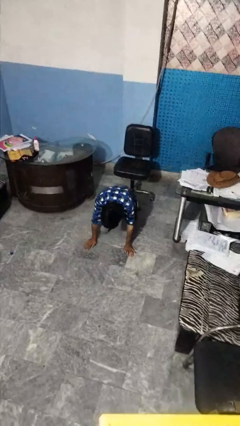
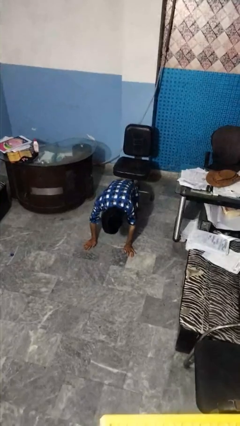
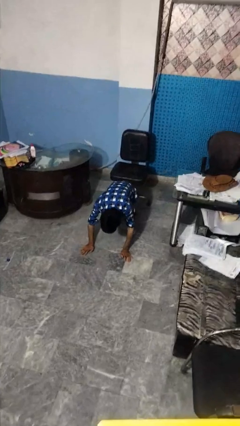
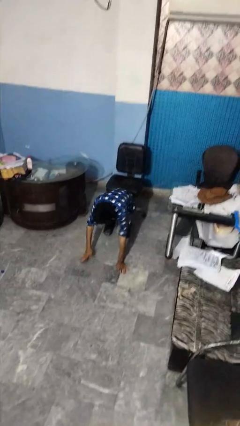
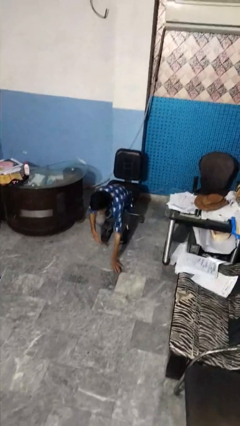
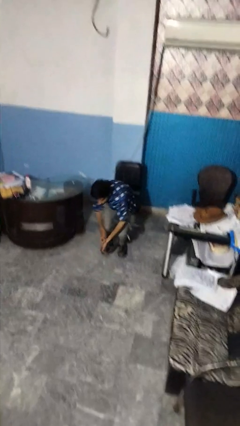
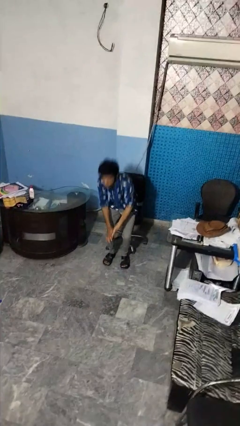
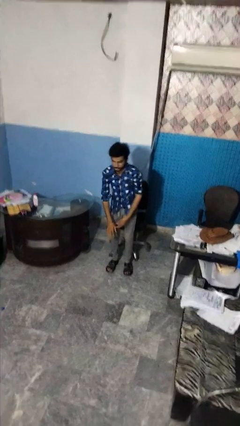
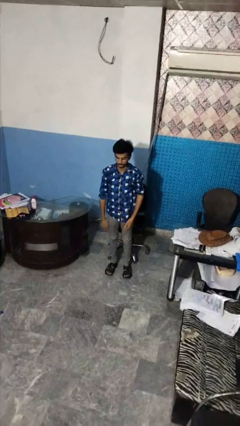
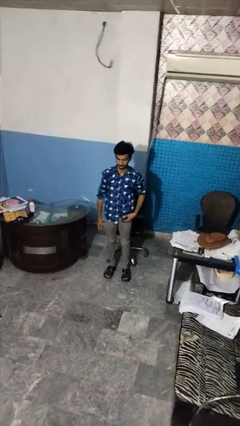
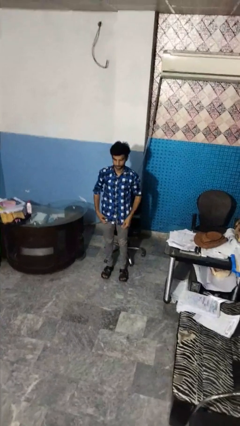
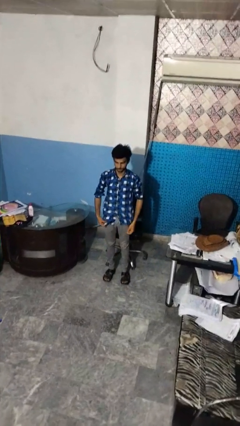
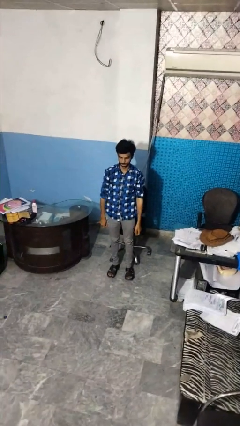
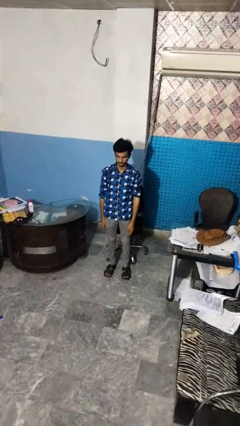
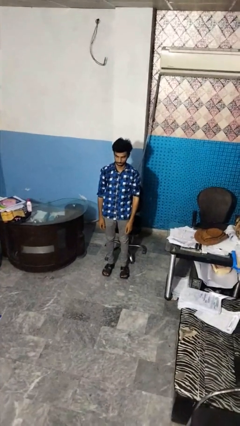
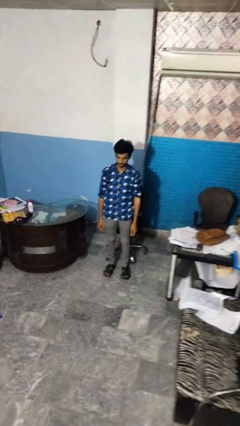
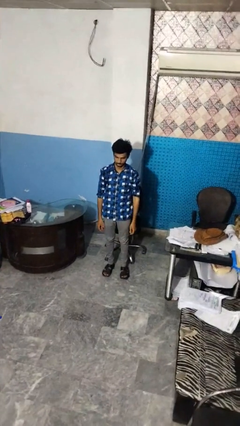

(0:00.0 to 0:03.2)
person stands up from floor

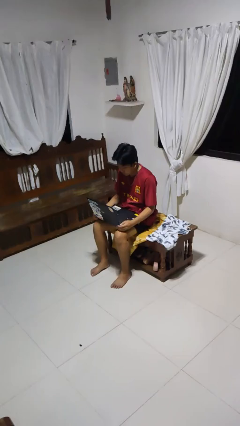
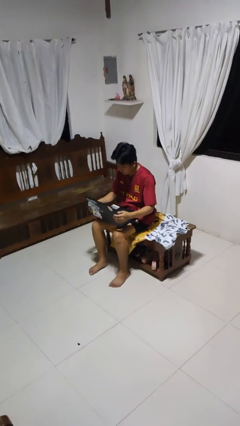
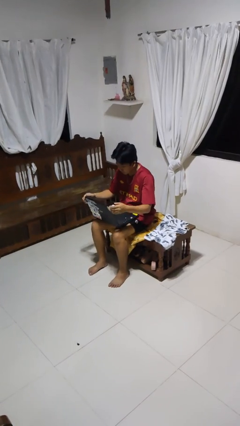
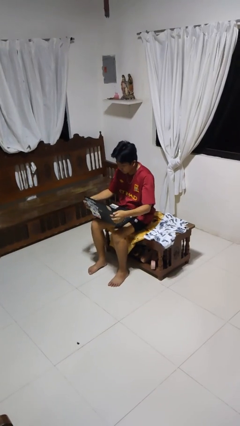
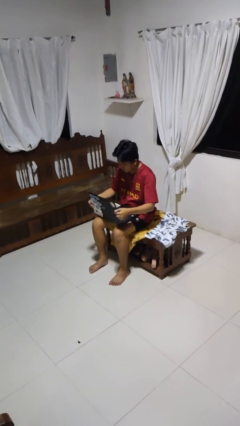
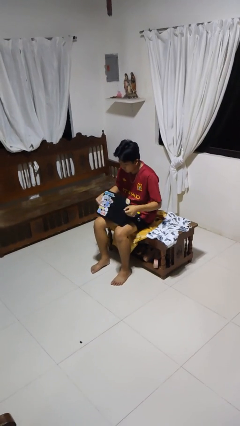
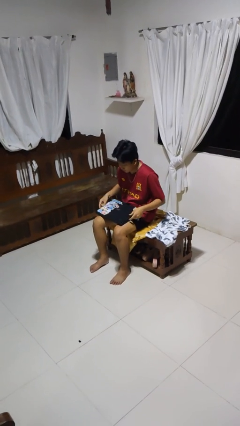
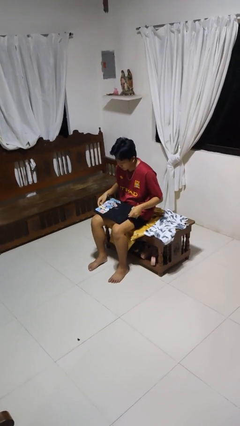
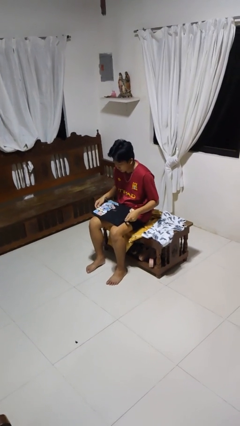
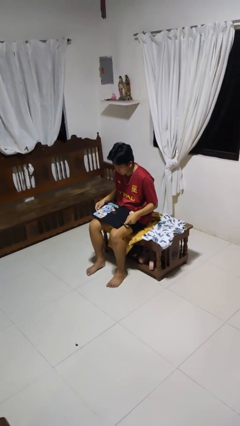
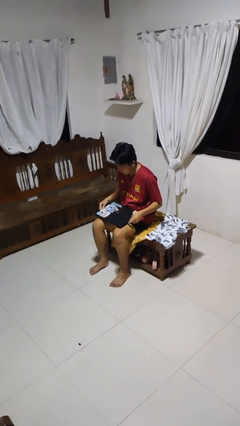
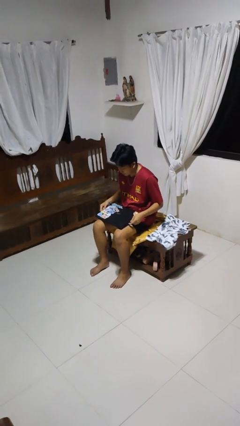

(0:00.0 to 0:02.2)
person closes laptop

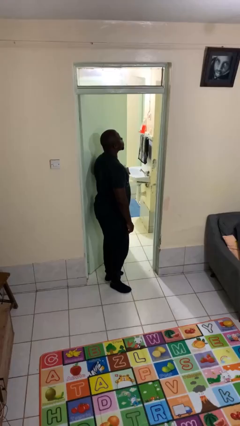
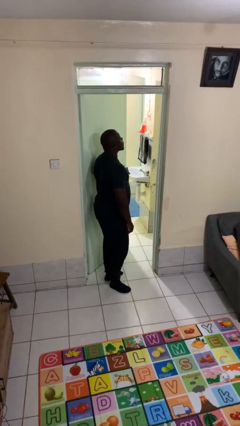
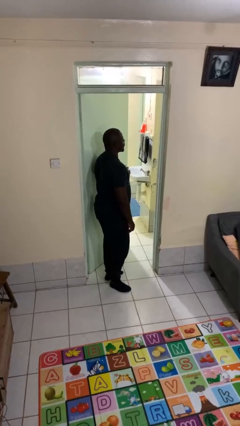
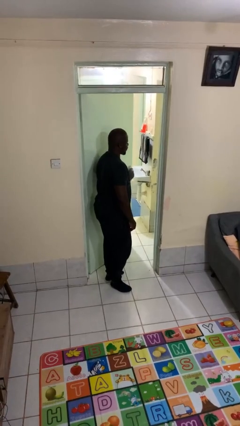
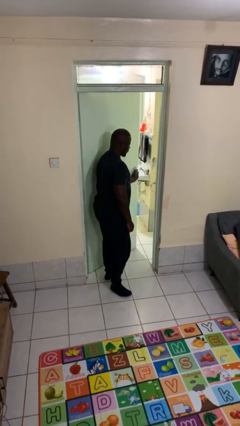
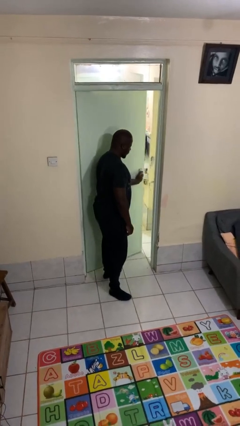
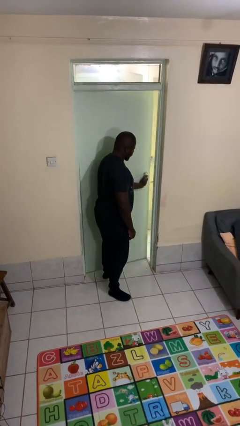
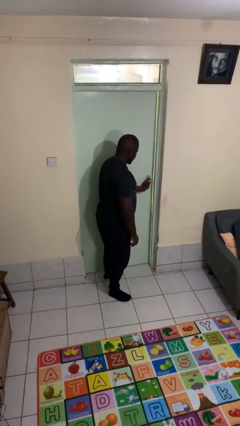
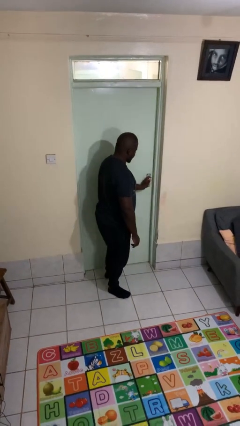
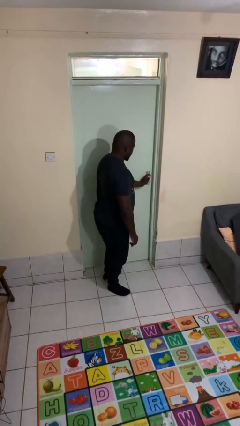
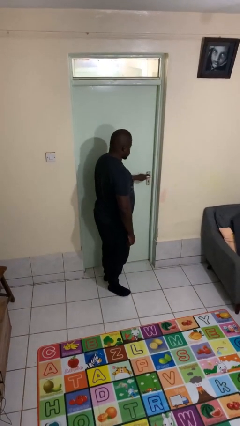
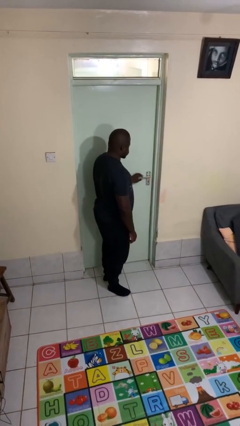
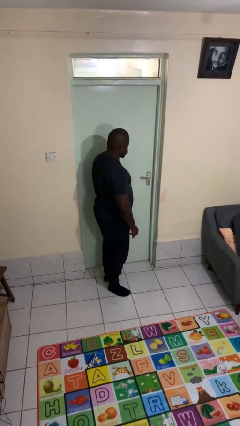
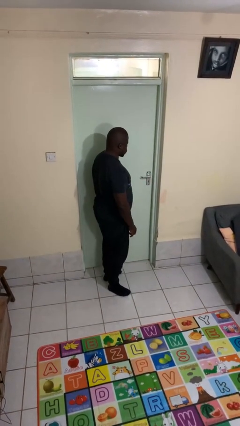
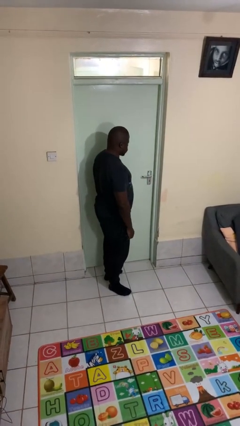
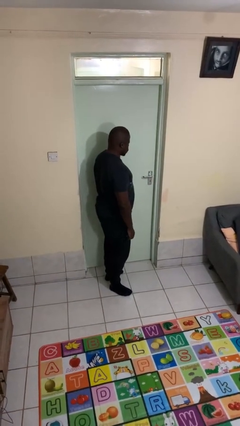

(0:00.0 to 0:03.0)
person closes facility door

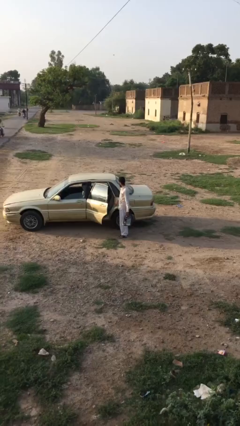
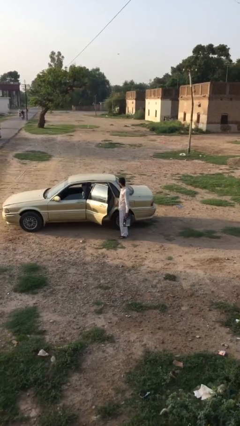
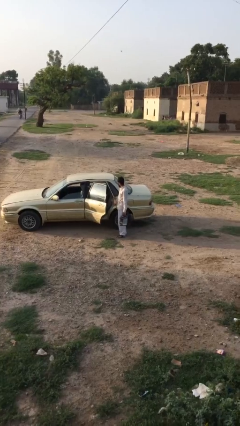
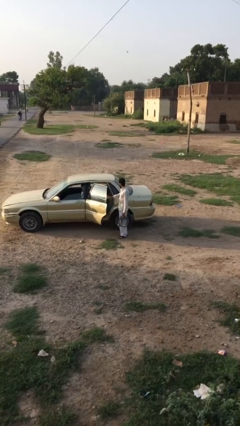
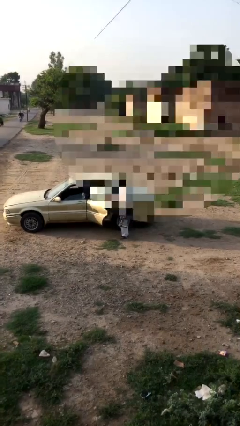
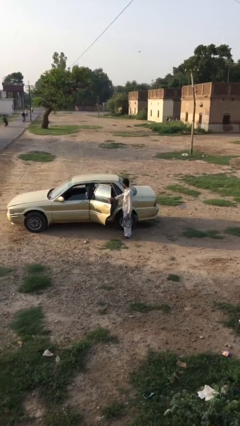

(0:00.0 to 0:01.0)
person closes car door

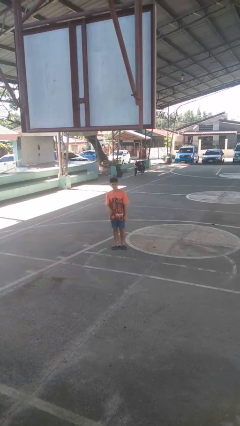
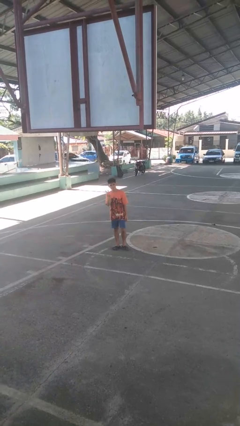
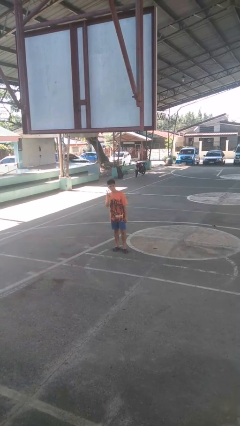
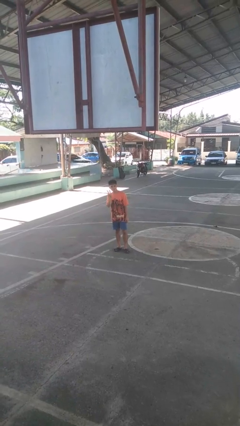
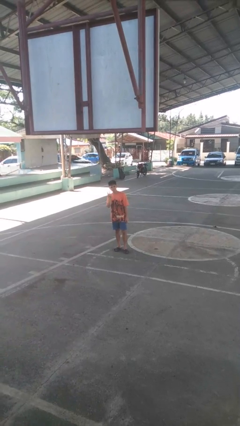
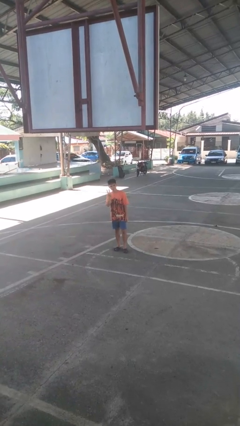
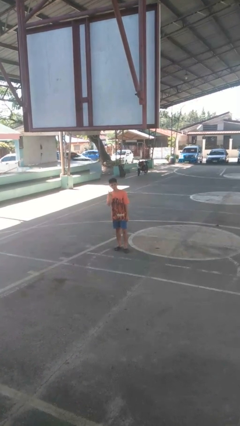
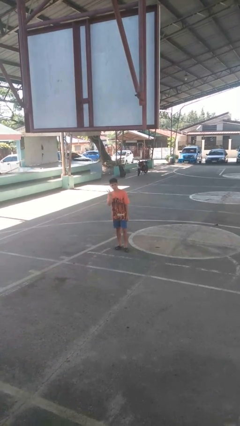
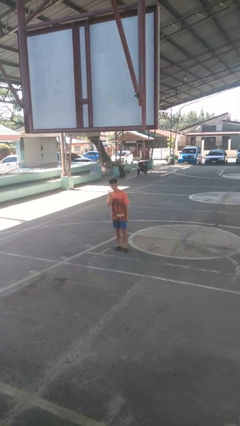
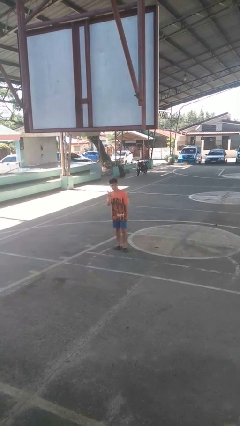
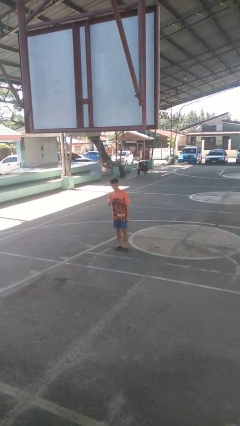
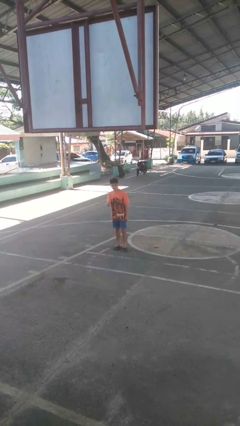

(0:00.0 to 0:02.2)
person gestures peace

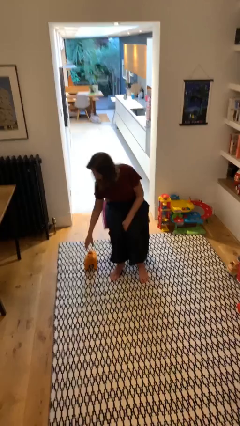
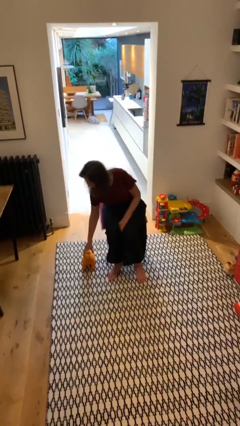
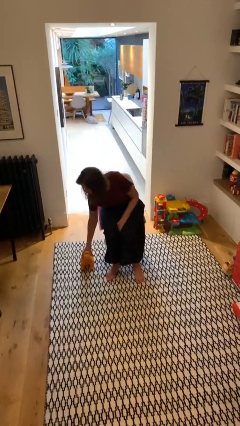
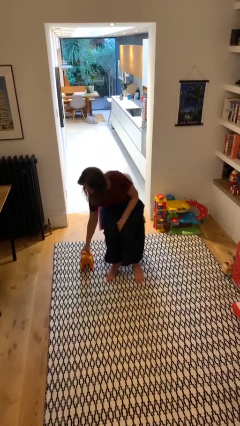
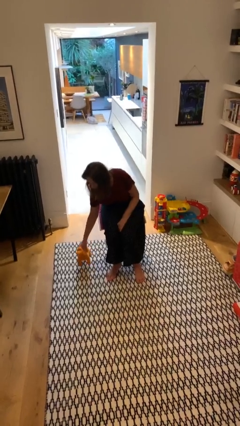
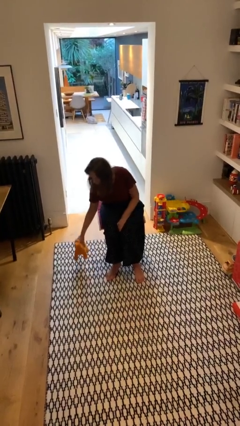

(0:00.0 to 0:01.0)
person picks up object from floor

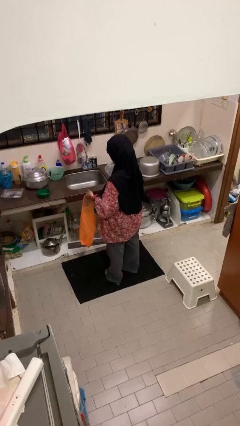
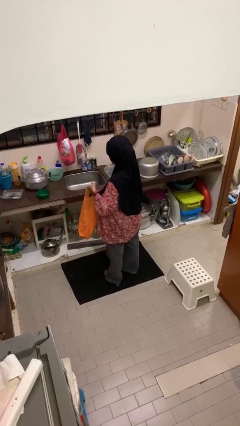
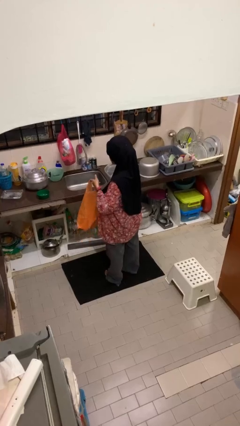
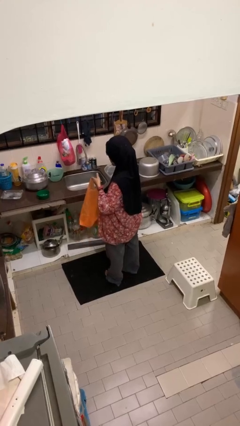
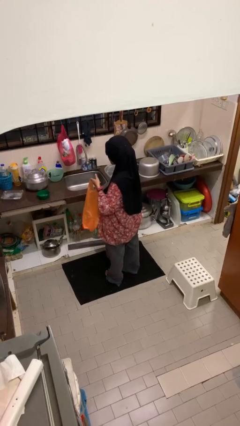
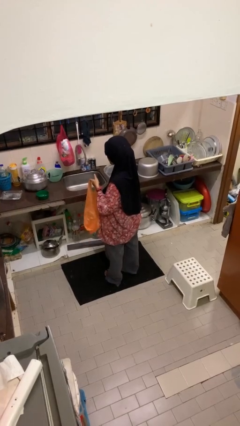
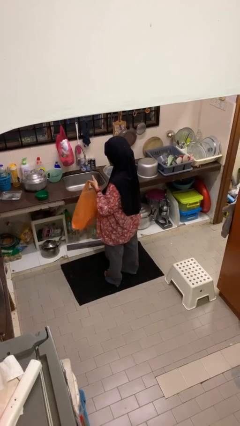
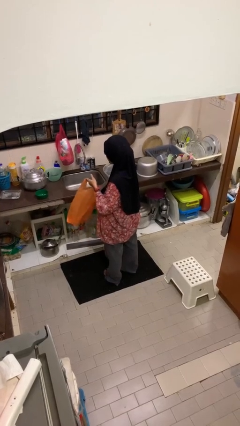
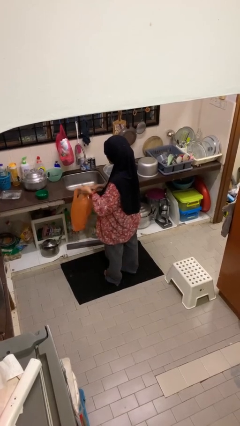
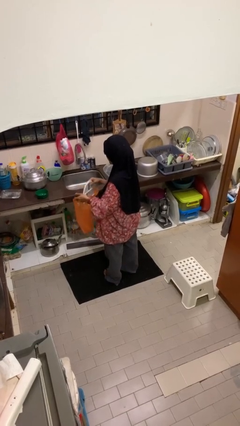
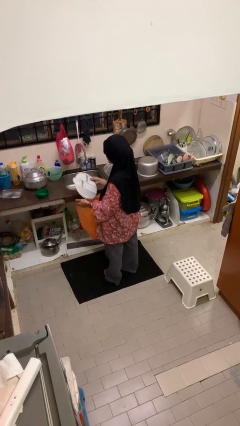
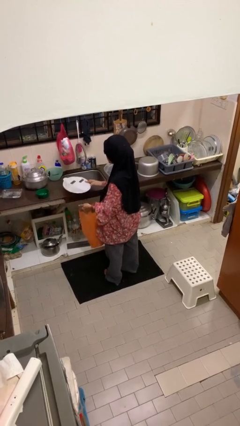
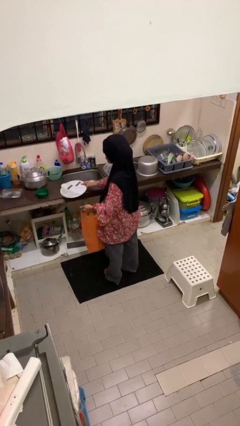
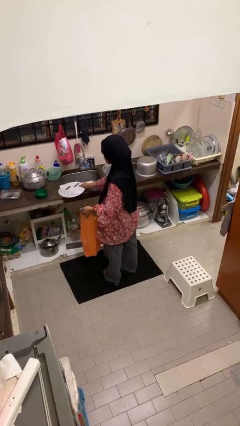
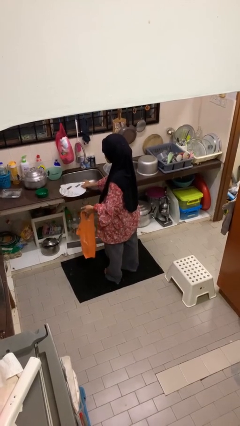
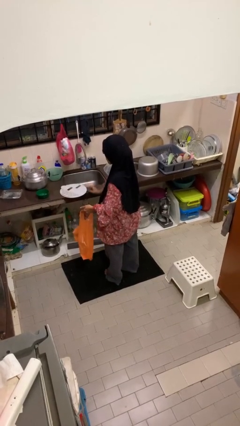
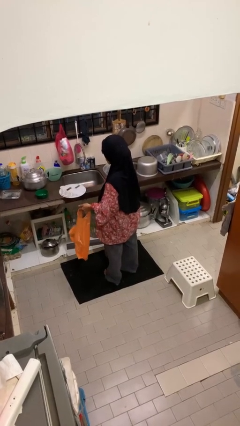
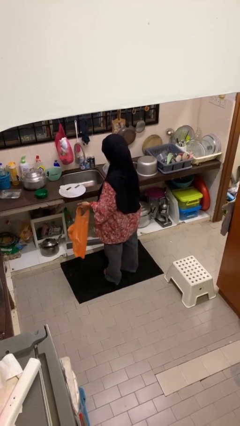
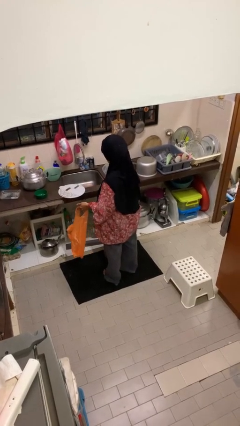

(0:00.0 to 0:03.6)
person takes object from bag

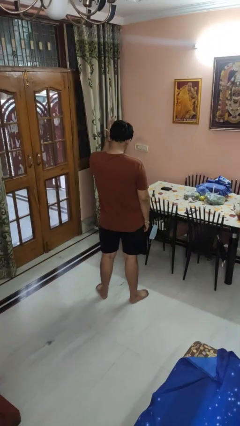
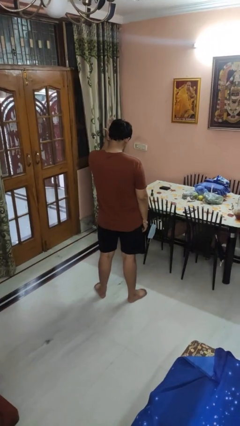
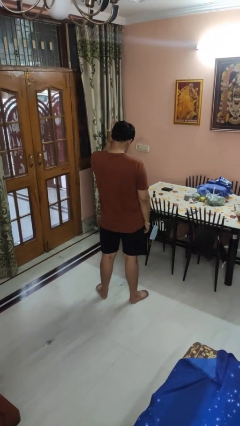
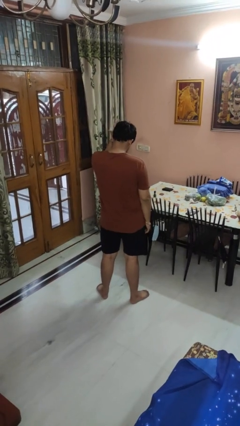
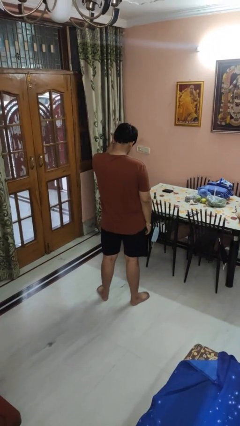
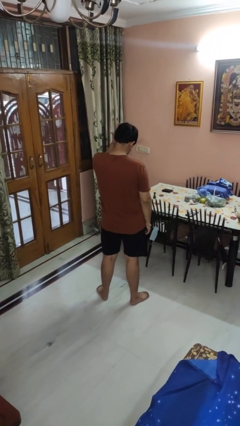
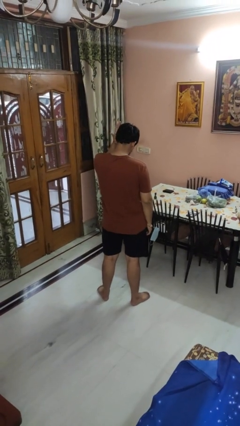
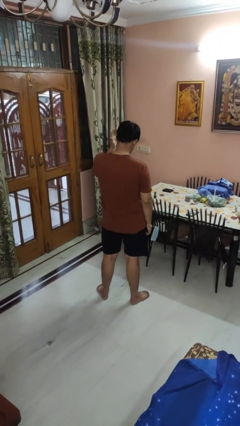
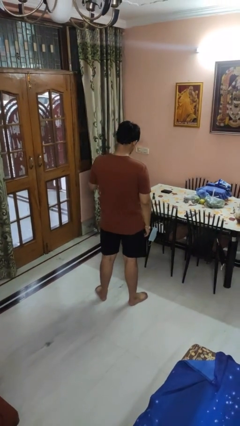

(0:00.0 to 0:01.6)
person pats head
